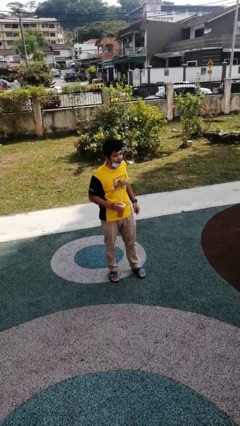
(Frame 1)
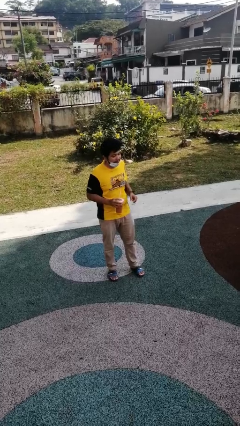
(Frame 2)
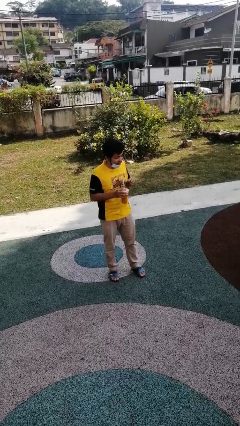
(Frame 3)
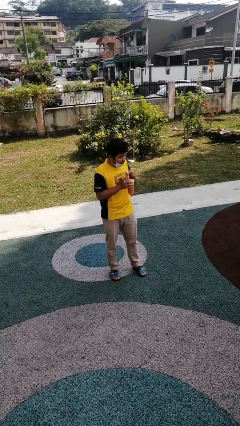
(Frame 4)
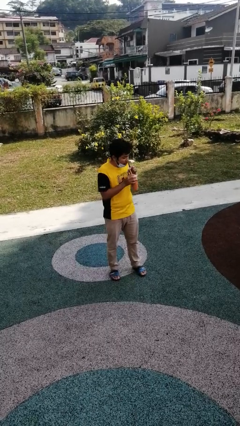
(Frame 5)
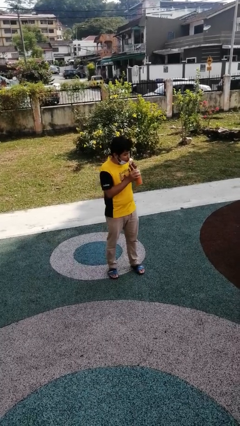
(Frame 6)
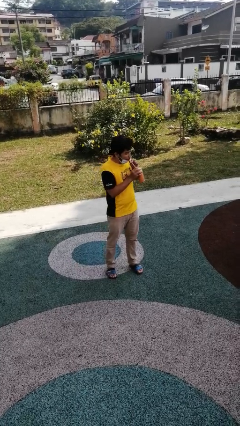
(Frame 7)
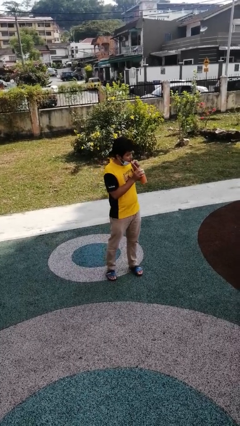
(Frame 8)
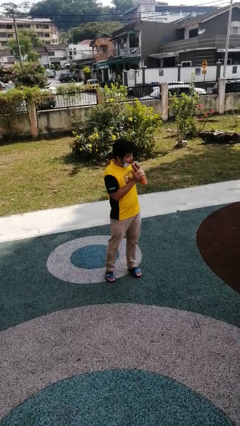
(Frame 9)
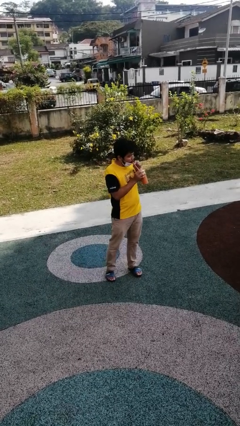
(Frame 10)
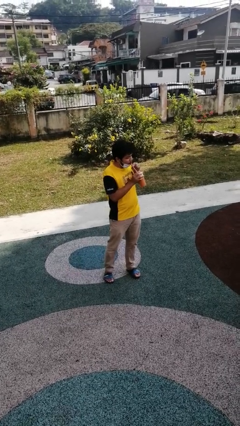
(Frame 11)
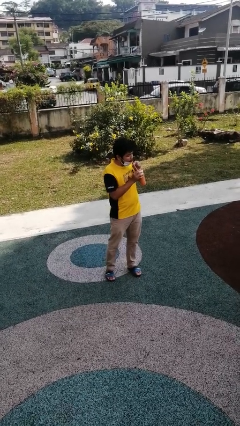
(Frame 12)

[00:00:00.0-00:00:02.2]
person drinks from straw

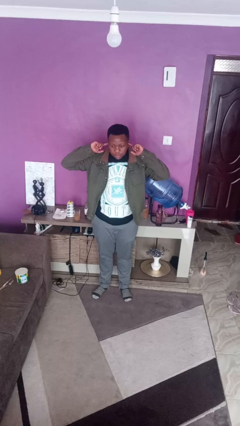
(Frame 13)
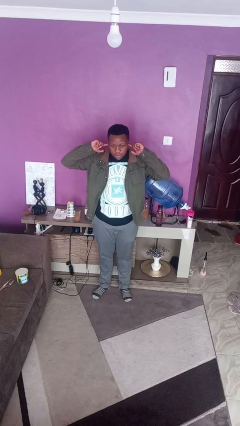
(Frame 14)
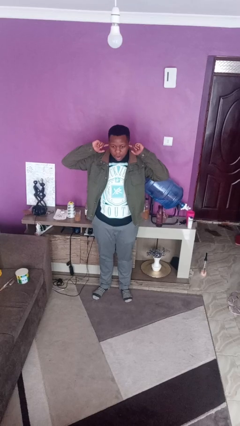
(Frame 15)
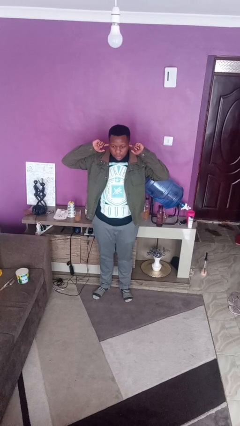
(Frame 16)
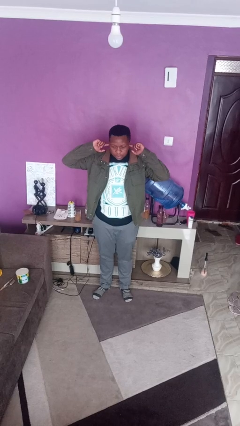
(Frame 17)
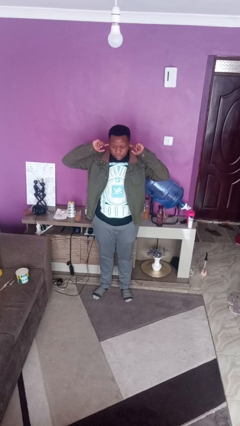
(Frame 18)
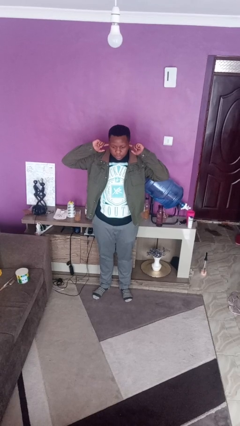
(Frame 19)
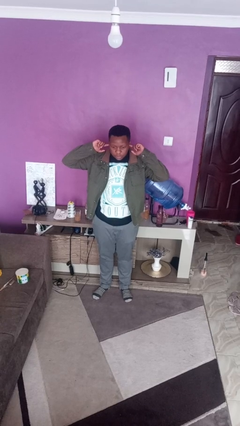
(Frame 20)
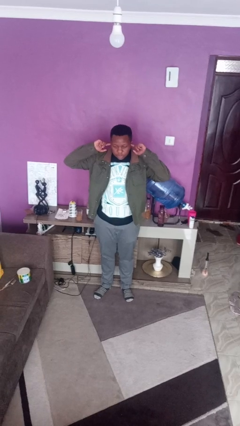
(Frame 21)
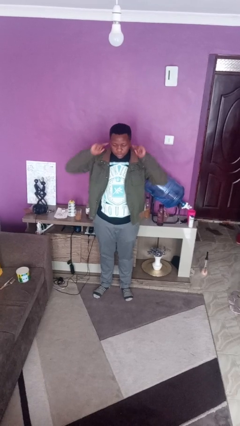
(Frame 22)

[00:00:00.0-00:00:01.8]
person puts fingers in ear

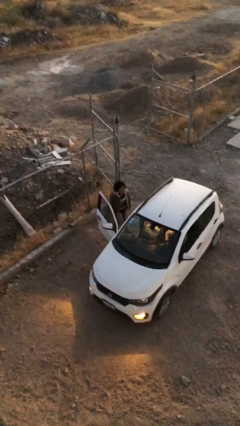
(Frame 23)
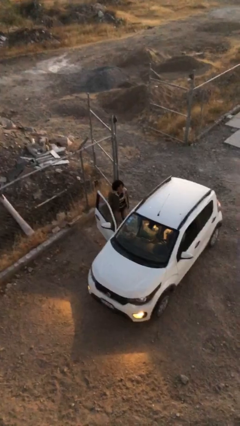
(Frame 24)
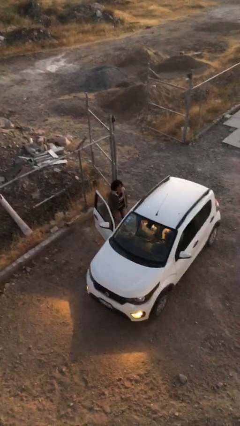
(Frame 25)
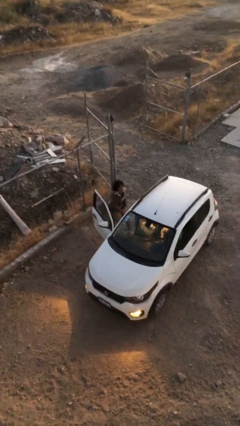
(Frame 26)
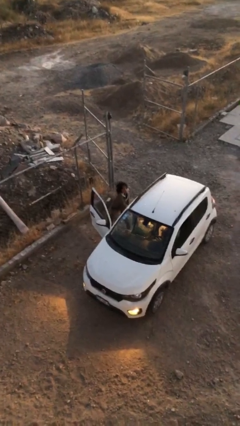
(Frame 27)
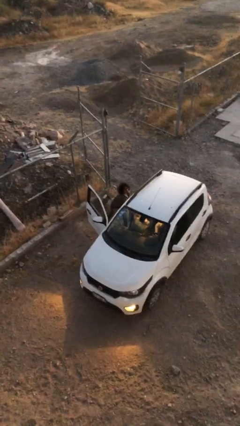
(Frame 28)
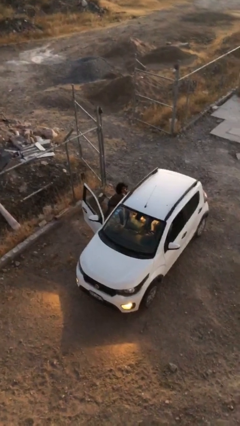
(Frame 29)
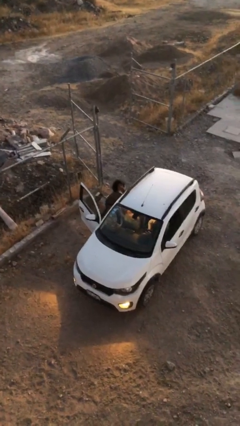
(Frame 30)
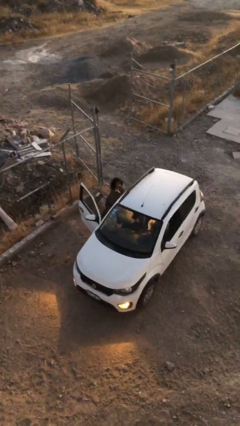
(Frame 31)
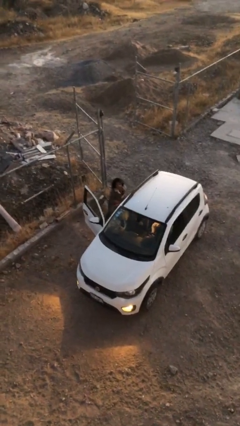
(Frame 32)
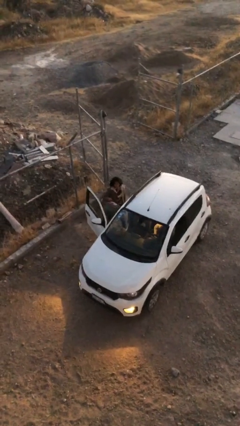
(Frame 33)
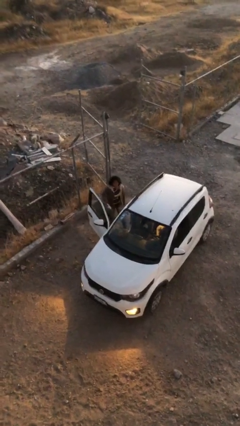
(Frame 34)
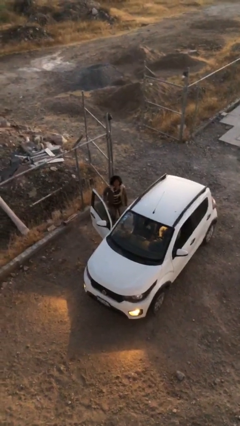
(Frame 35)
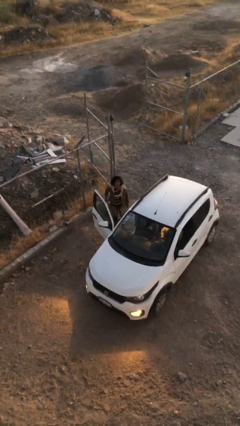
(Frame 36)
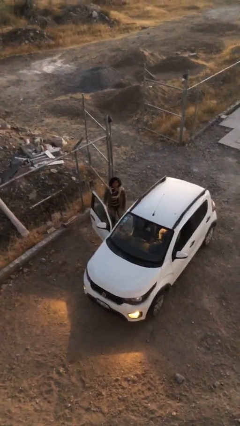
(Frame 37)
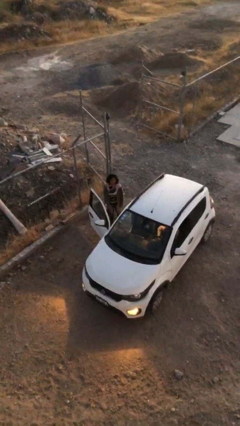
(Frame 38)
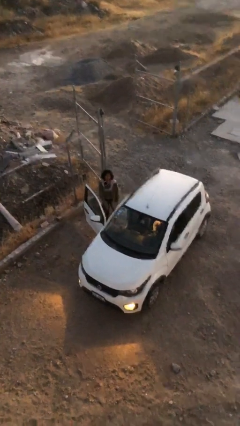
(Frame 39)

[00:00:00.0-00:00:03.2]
person unloads car

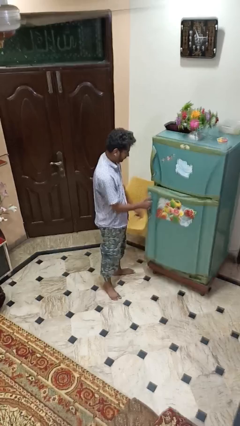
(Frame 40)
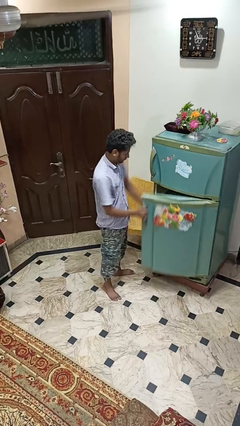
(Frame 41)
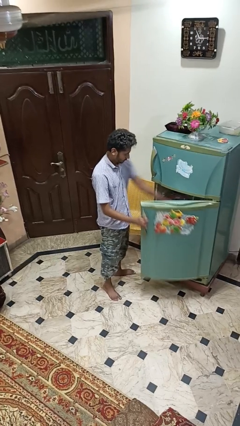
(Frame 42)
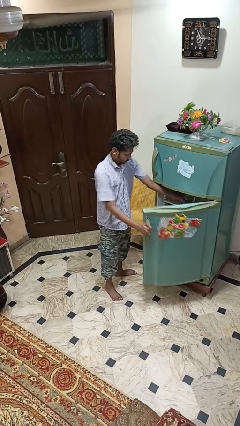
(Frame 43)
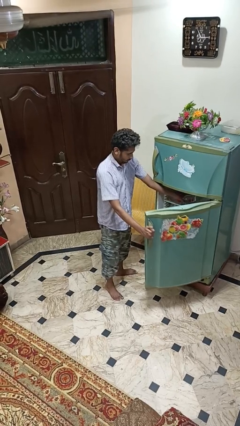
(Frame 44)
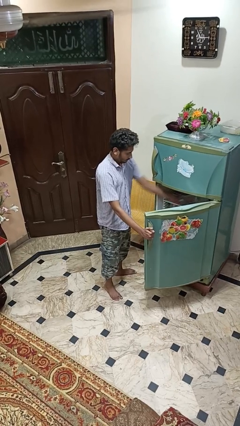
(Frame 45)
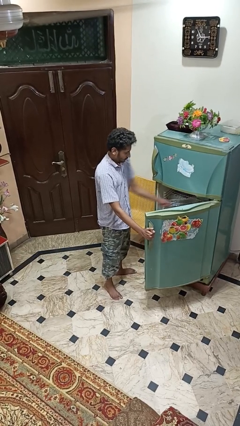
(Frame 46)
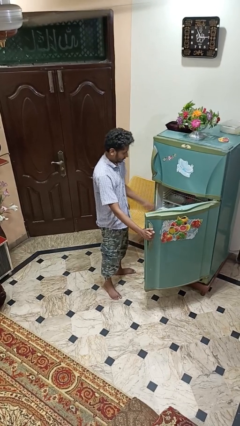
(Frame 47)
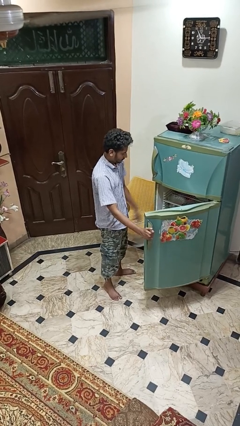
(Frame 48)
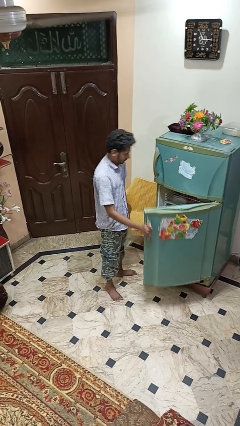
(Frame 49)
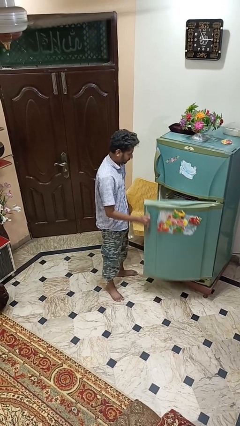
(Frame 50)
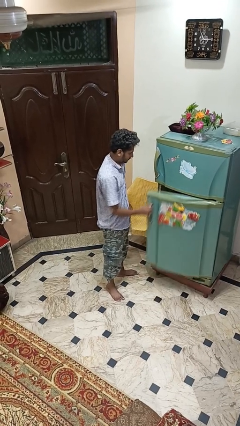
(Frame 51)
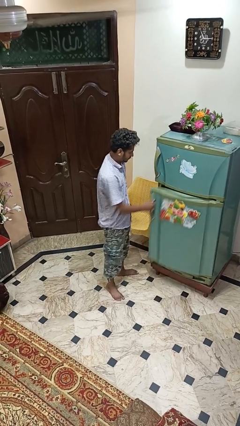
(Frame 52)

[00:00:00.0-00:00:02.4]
person takes object from refrigerator

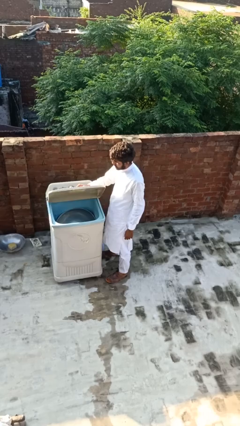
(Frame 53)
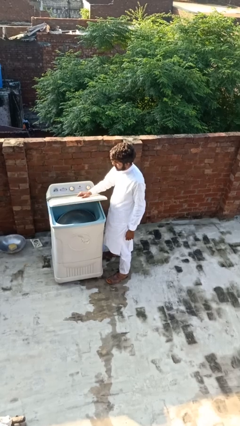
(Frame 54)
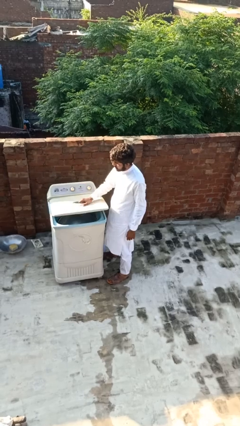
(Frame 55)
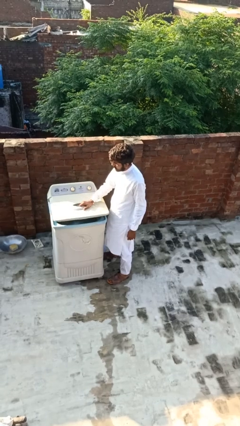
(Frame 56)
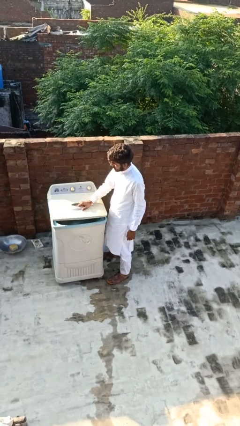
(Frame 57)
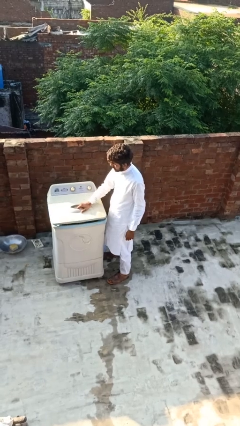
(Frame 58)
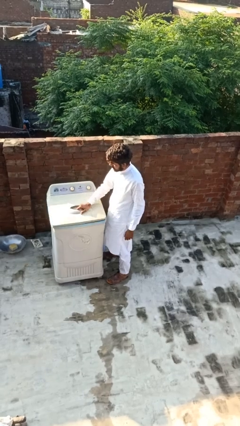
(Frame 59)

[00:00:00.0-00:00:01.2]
person closes clothes washer

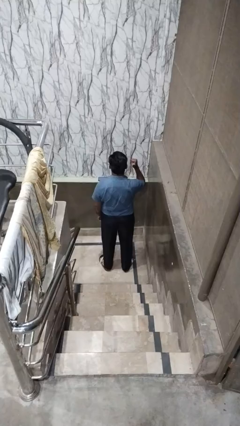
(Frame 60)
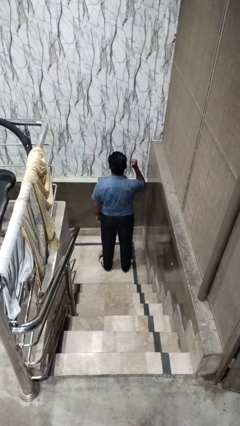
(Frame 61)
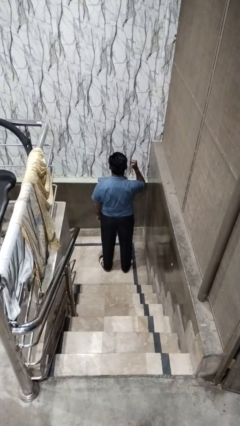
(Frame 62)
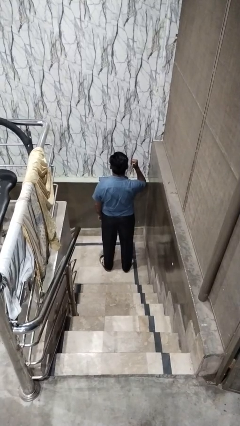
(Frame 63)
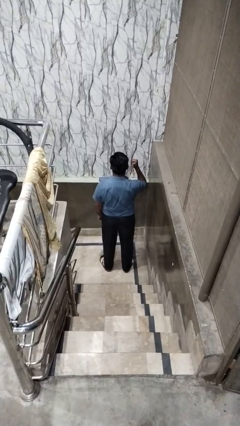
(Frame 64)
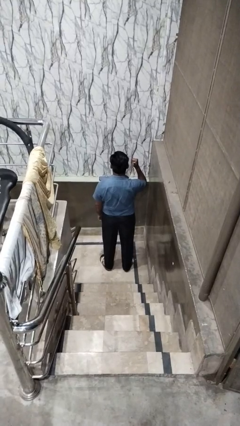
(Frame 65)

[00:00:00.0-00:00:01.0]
person gestures behind me

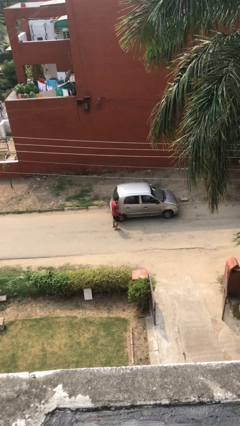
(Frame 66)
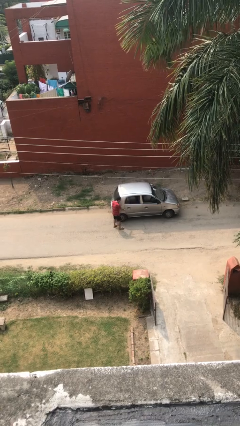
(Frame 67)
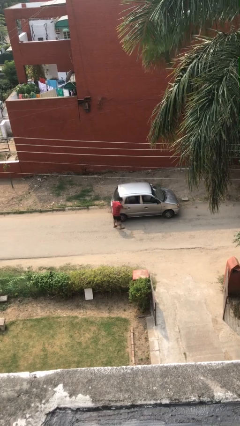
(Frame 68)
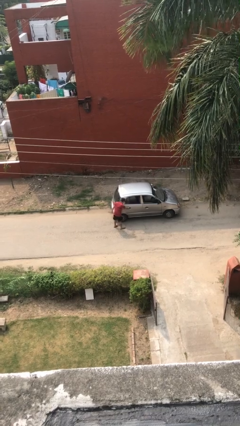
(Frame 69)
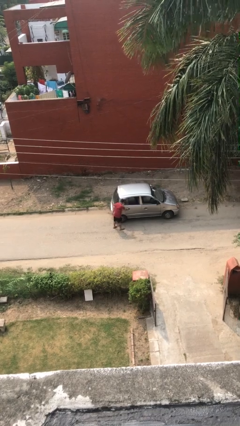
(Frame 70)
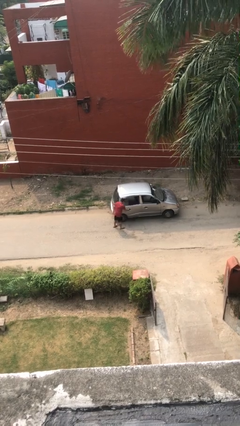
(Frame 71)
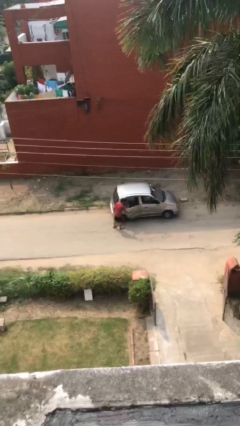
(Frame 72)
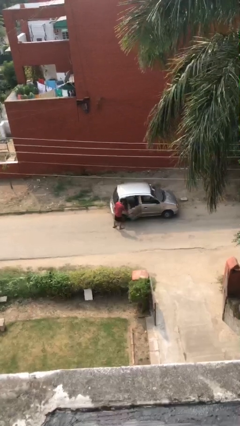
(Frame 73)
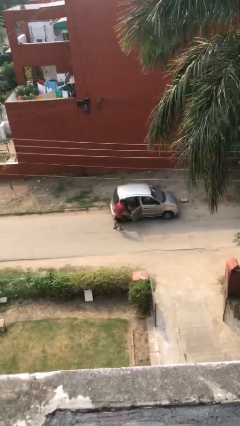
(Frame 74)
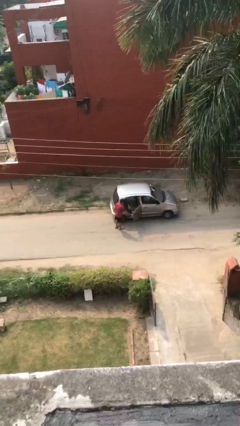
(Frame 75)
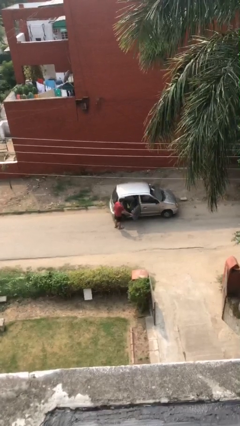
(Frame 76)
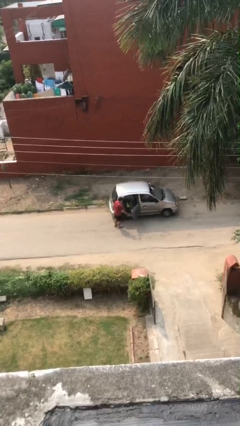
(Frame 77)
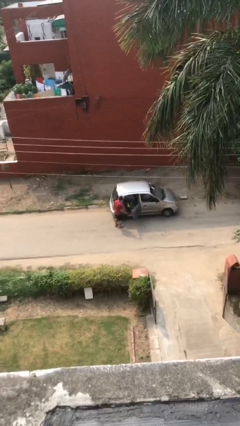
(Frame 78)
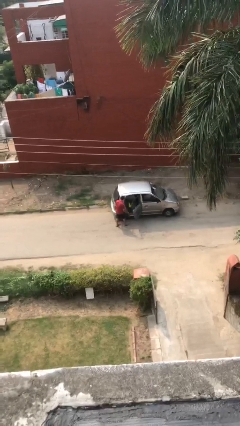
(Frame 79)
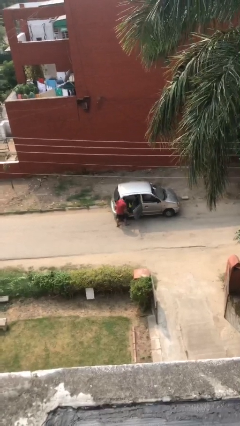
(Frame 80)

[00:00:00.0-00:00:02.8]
person opens car door

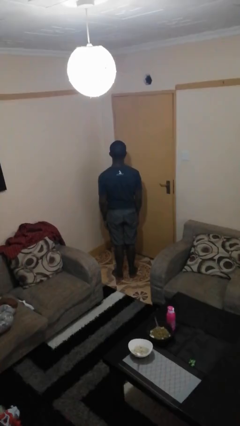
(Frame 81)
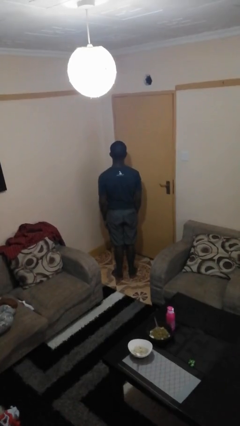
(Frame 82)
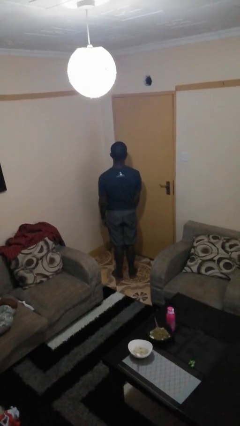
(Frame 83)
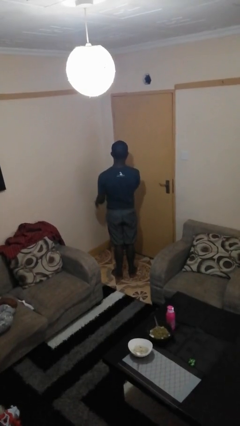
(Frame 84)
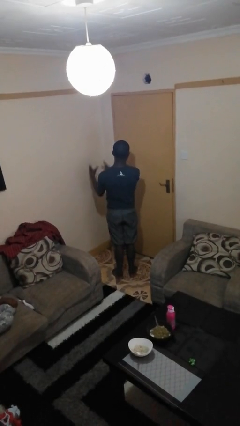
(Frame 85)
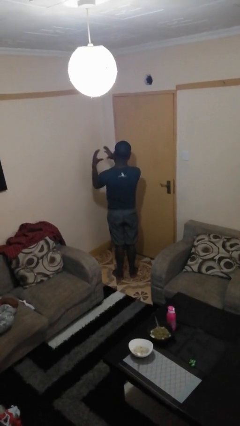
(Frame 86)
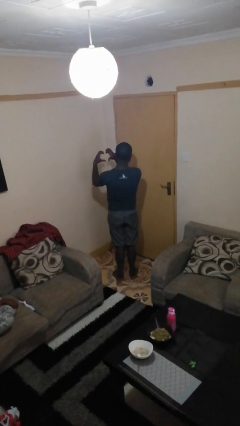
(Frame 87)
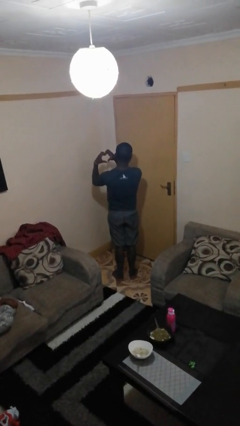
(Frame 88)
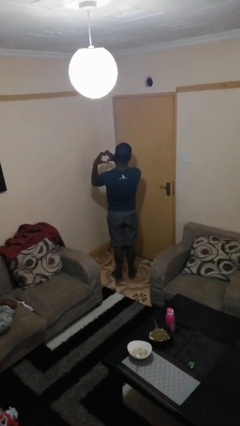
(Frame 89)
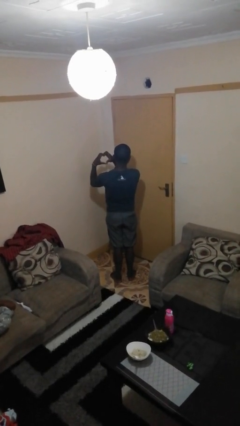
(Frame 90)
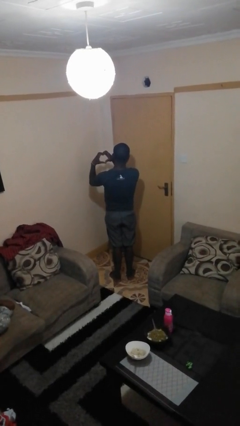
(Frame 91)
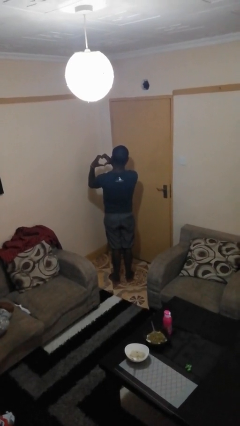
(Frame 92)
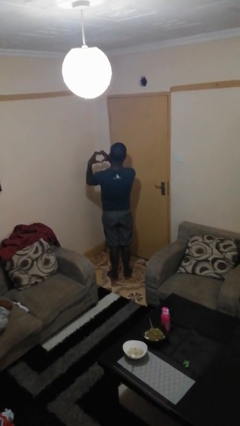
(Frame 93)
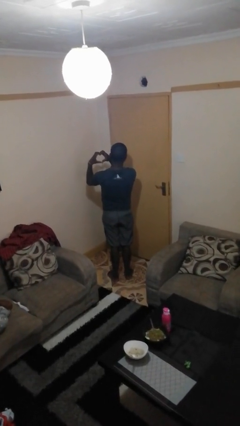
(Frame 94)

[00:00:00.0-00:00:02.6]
person gestures heart
